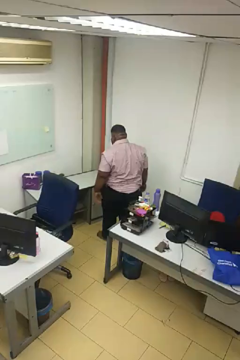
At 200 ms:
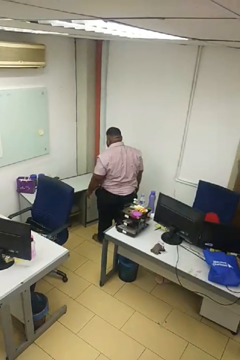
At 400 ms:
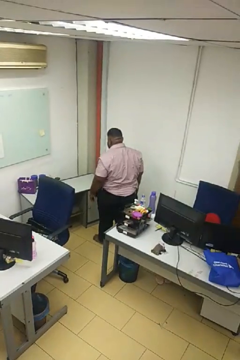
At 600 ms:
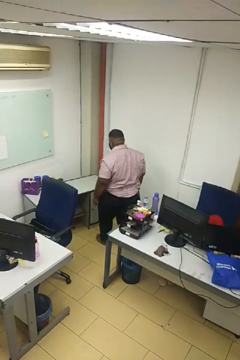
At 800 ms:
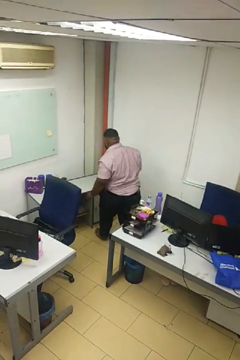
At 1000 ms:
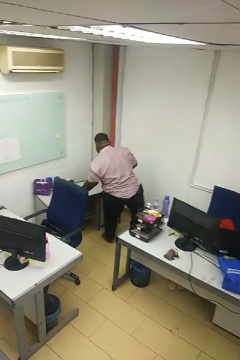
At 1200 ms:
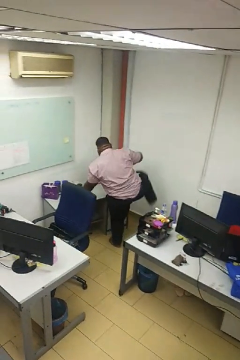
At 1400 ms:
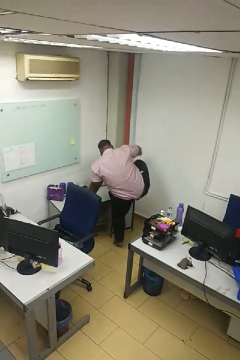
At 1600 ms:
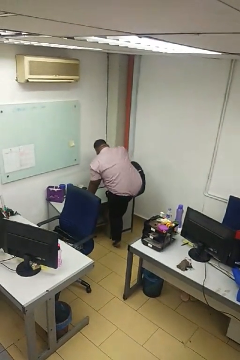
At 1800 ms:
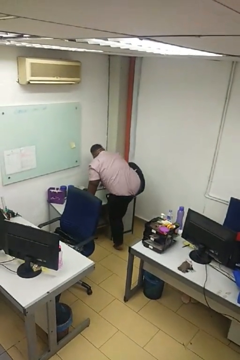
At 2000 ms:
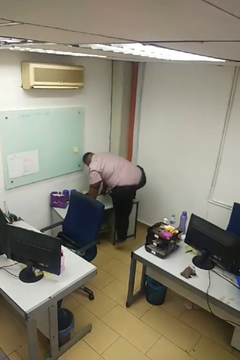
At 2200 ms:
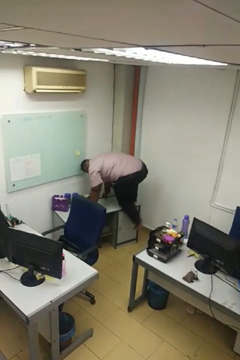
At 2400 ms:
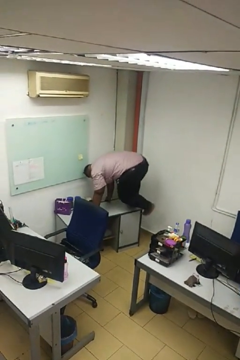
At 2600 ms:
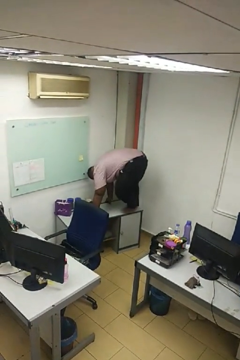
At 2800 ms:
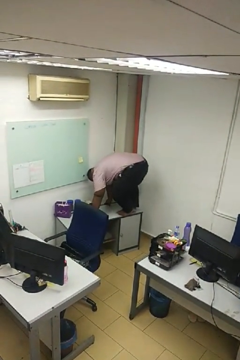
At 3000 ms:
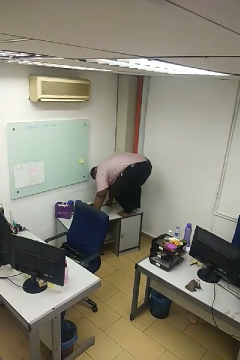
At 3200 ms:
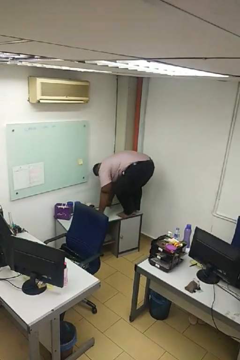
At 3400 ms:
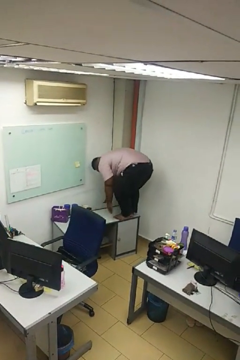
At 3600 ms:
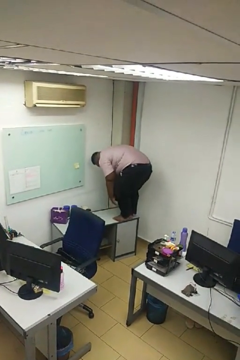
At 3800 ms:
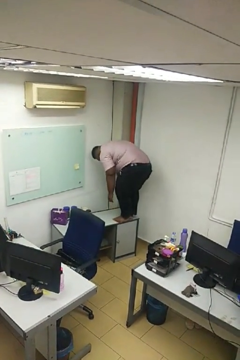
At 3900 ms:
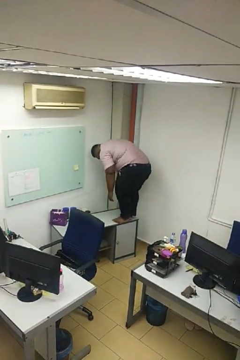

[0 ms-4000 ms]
person climbs on table

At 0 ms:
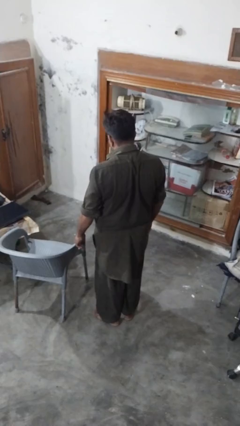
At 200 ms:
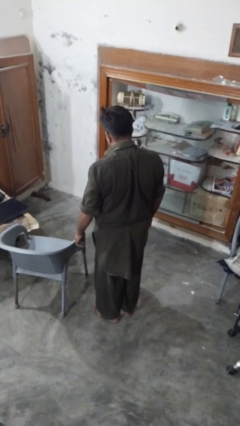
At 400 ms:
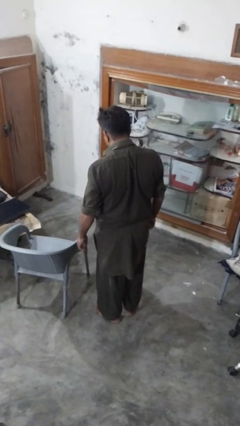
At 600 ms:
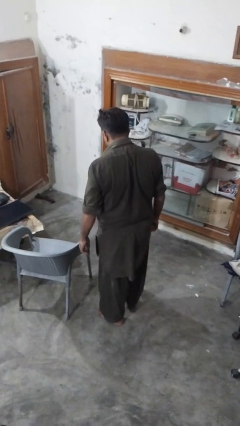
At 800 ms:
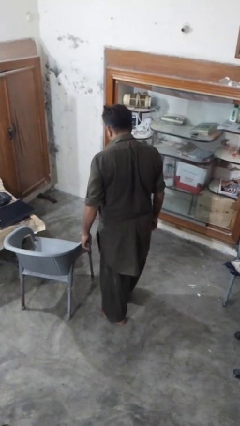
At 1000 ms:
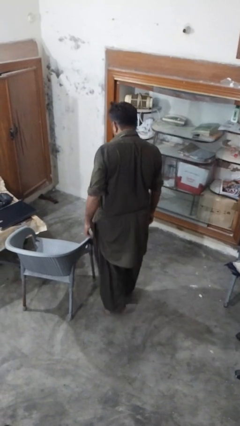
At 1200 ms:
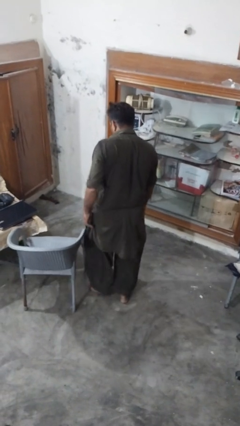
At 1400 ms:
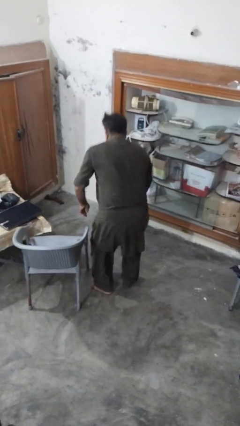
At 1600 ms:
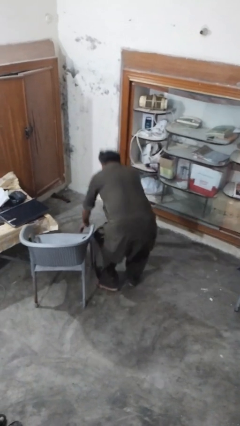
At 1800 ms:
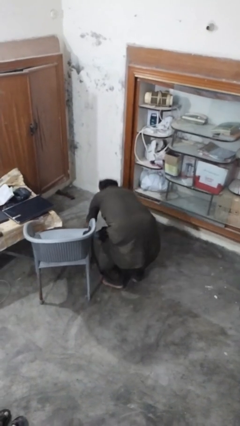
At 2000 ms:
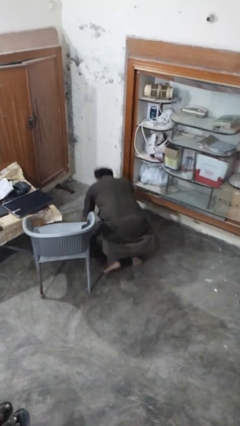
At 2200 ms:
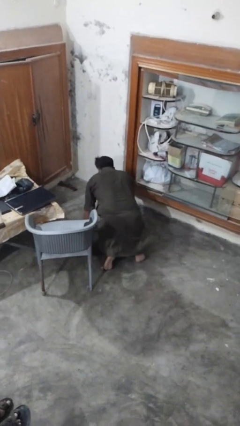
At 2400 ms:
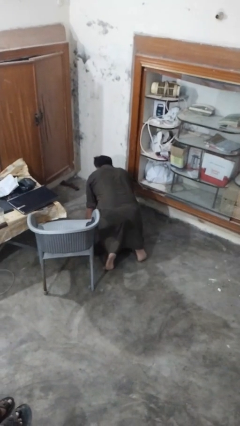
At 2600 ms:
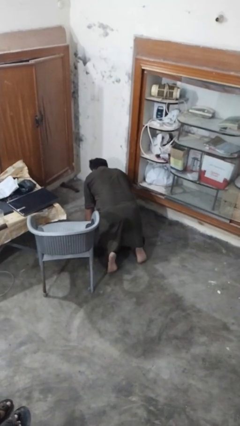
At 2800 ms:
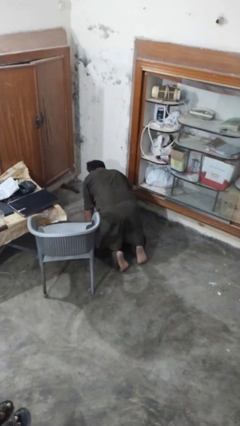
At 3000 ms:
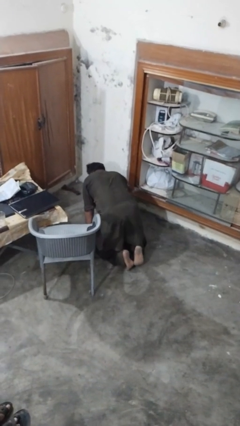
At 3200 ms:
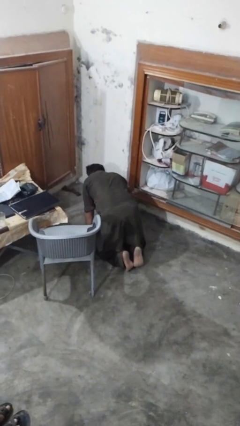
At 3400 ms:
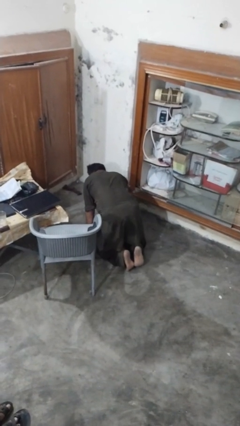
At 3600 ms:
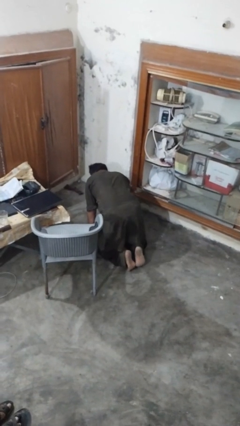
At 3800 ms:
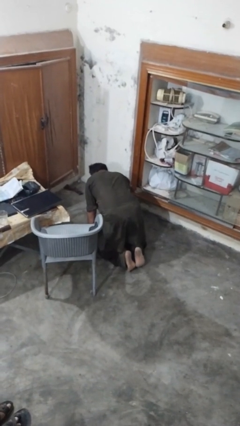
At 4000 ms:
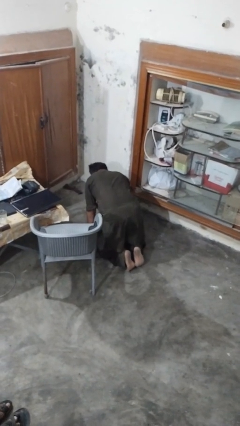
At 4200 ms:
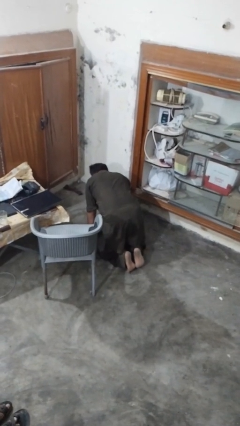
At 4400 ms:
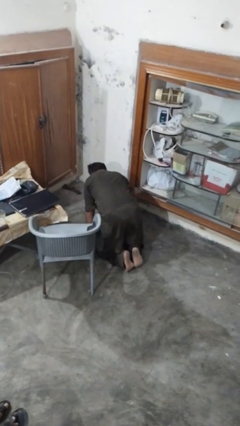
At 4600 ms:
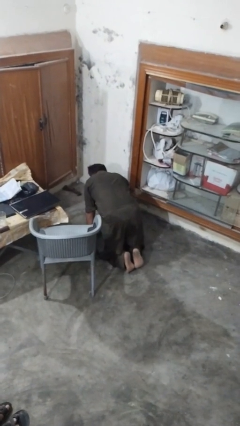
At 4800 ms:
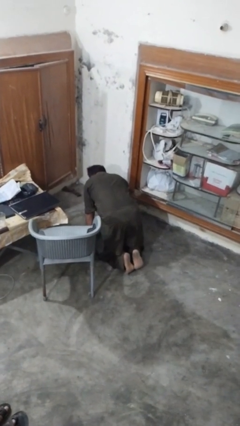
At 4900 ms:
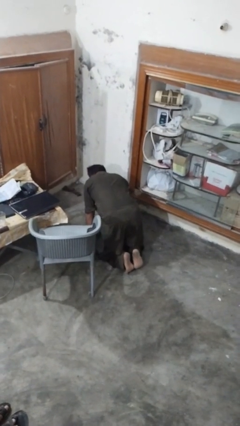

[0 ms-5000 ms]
person trips on object on floor

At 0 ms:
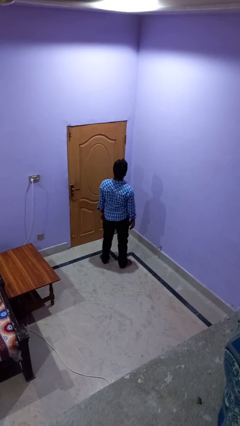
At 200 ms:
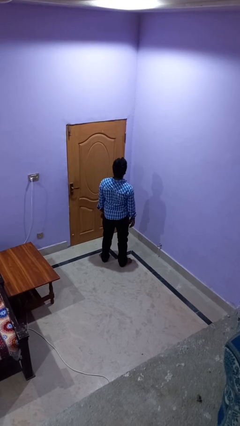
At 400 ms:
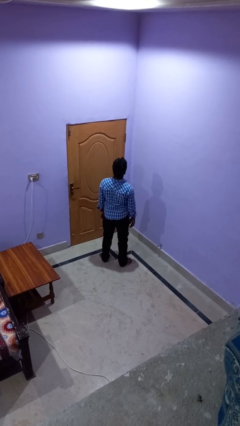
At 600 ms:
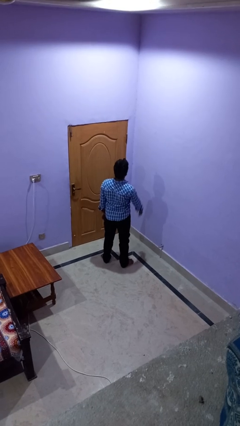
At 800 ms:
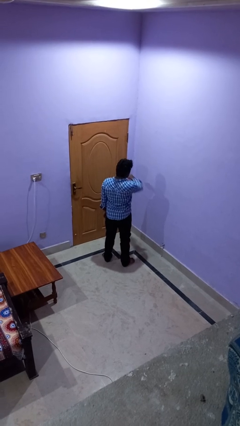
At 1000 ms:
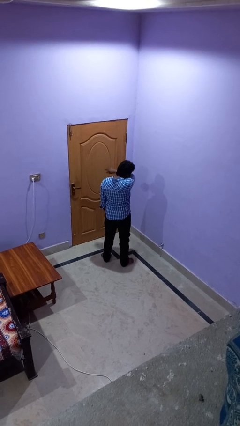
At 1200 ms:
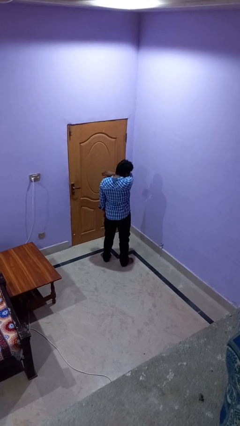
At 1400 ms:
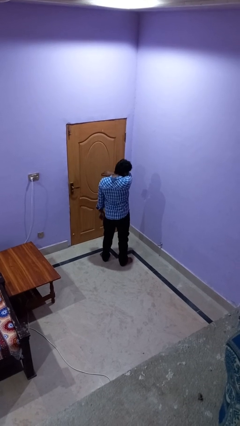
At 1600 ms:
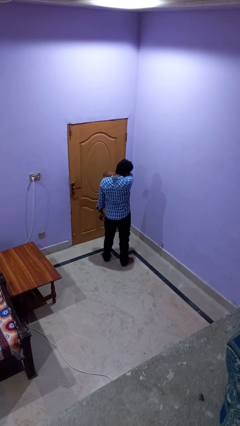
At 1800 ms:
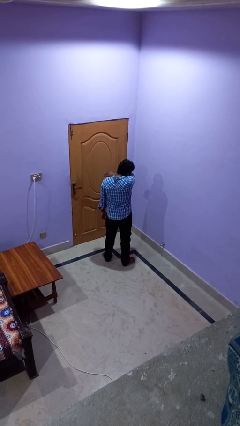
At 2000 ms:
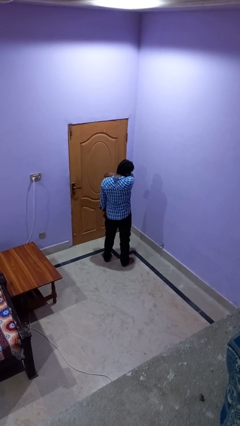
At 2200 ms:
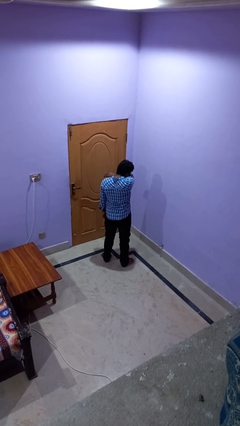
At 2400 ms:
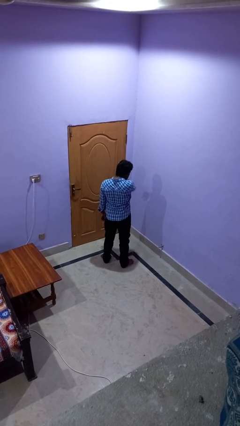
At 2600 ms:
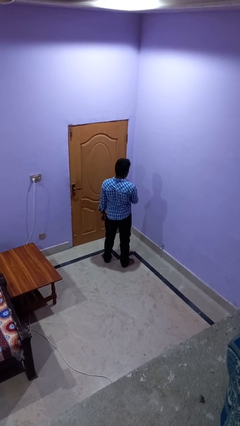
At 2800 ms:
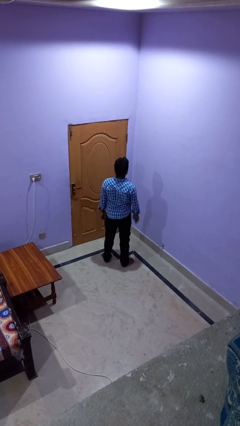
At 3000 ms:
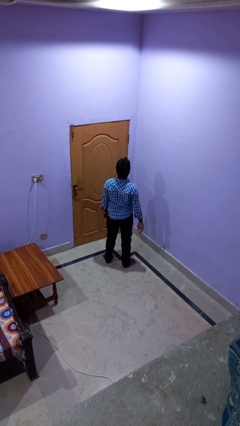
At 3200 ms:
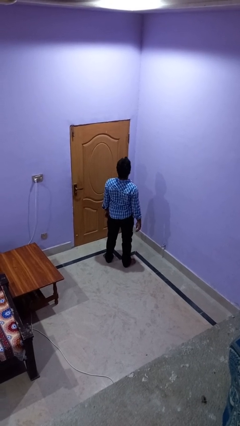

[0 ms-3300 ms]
person sneezes into arm

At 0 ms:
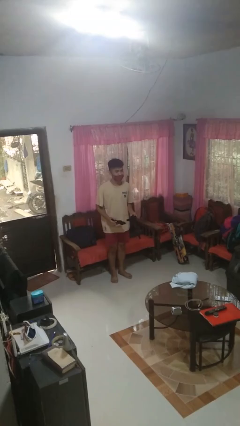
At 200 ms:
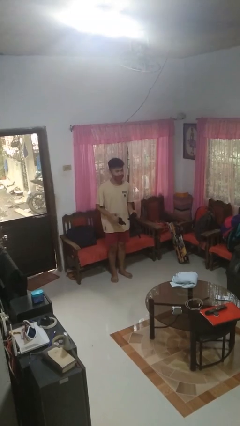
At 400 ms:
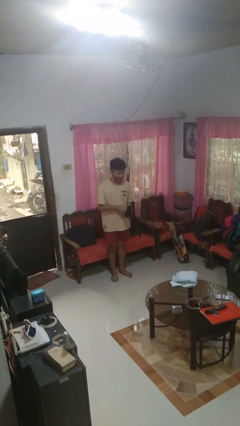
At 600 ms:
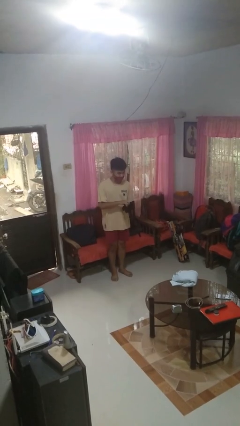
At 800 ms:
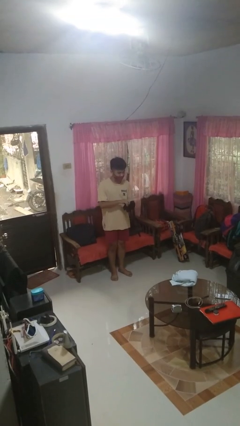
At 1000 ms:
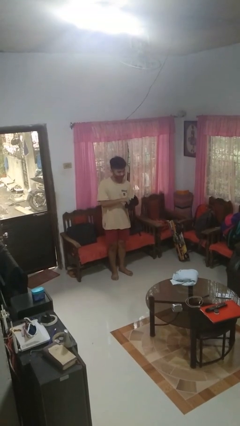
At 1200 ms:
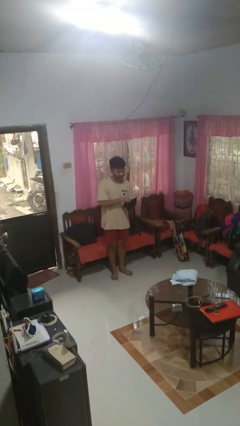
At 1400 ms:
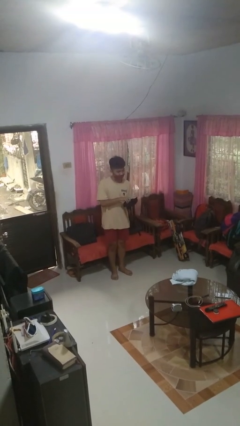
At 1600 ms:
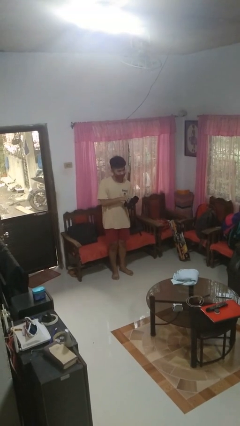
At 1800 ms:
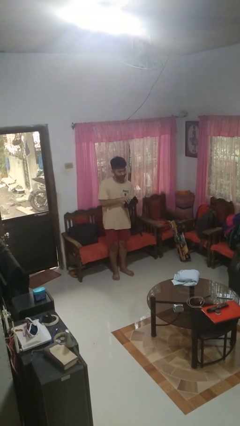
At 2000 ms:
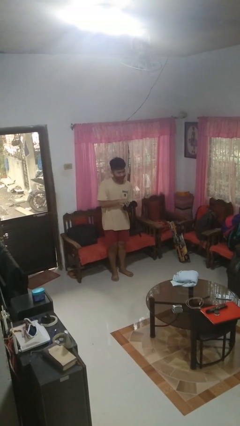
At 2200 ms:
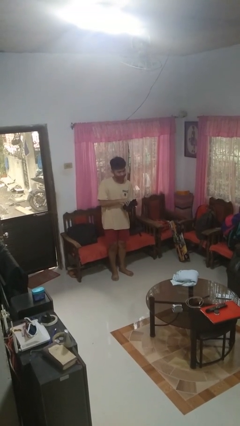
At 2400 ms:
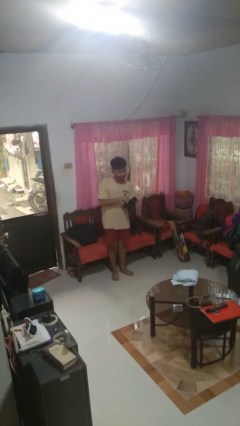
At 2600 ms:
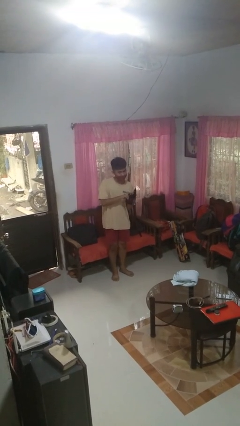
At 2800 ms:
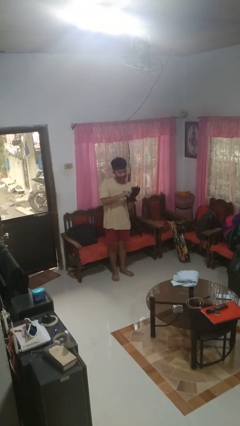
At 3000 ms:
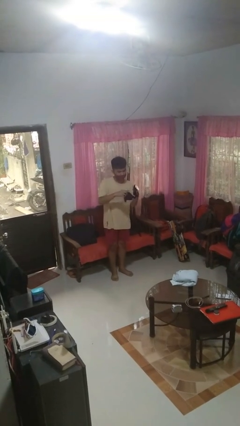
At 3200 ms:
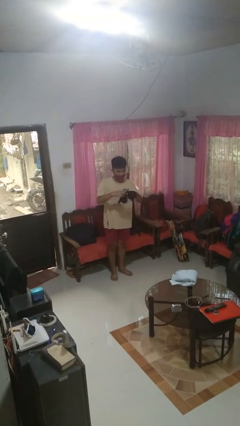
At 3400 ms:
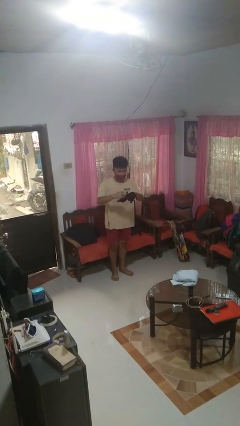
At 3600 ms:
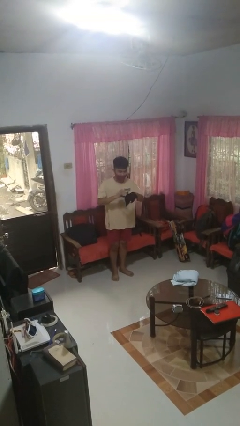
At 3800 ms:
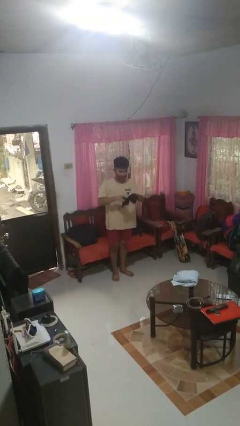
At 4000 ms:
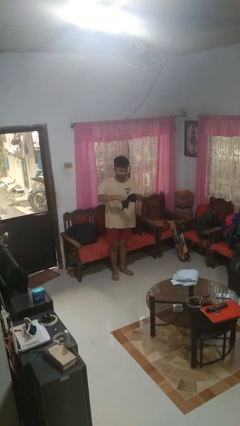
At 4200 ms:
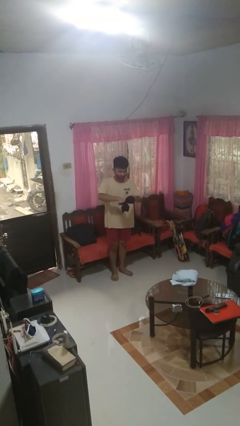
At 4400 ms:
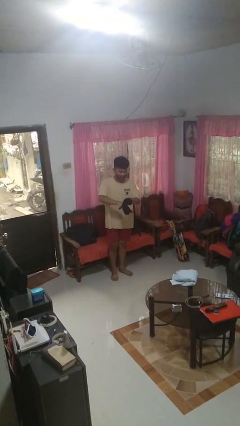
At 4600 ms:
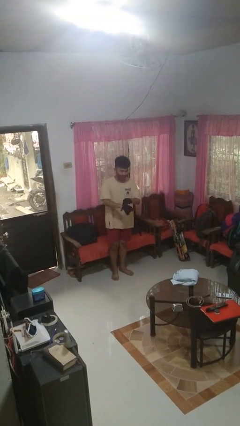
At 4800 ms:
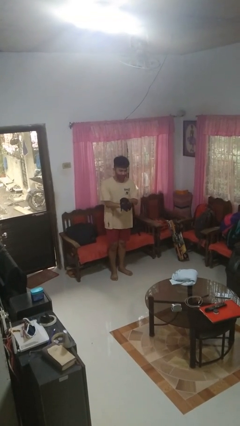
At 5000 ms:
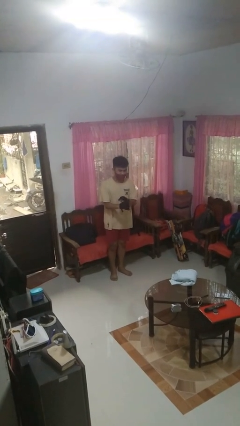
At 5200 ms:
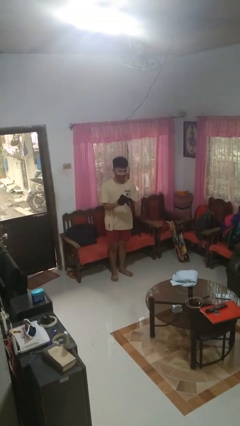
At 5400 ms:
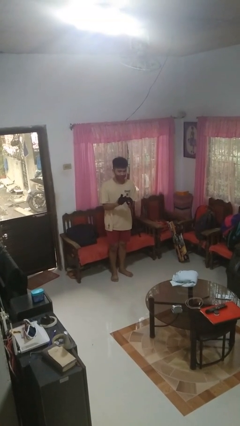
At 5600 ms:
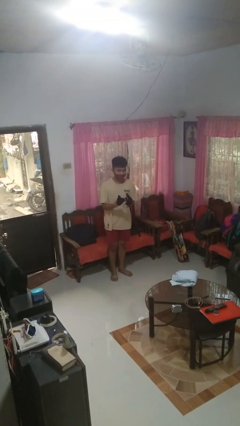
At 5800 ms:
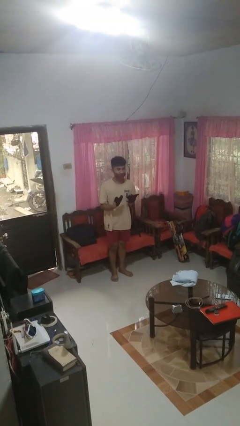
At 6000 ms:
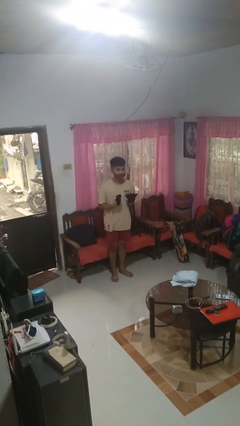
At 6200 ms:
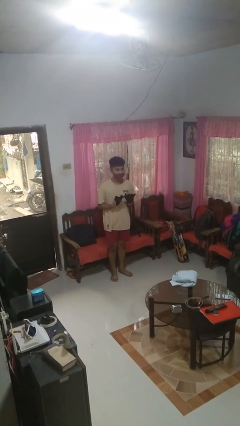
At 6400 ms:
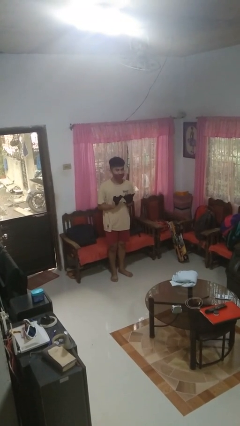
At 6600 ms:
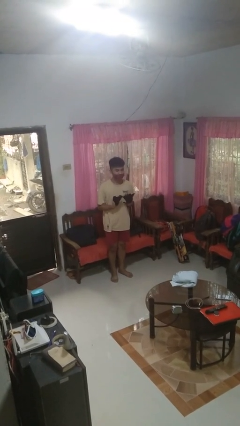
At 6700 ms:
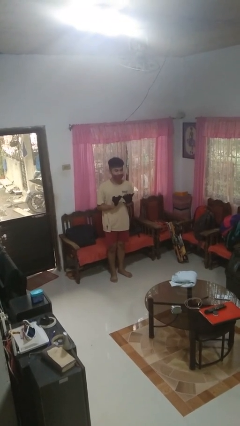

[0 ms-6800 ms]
person puts on gloves

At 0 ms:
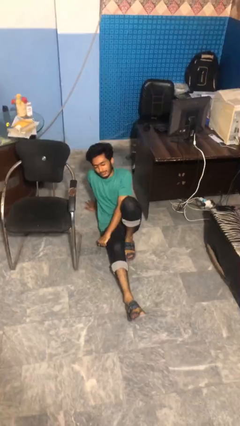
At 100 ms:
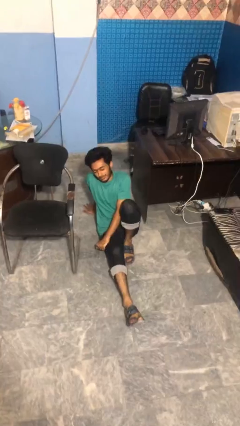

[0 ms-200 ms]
person stands up from floor
